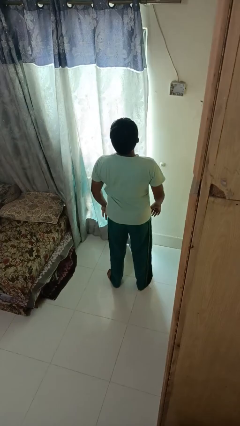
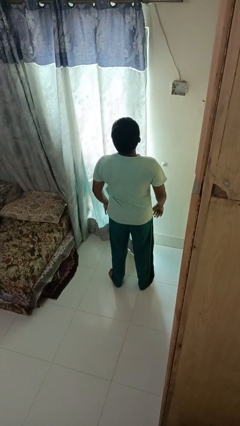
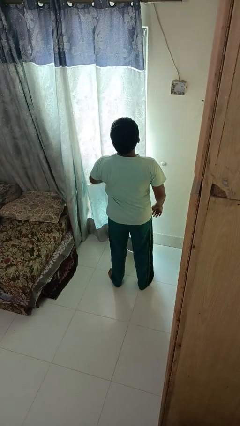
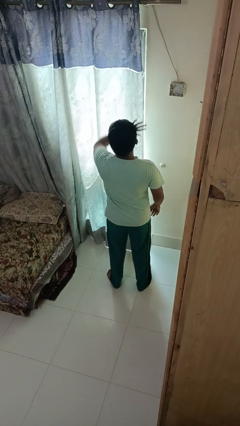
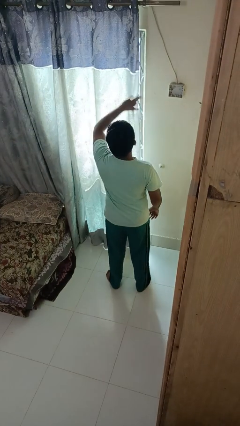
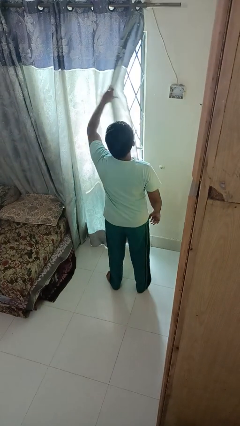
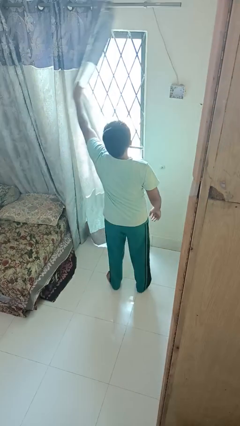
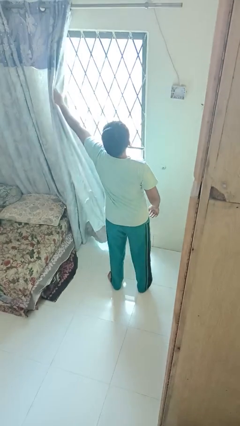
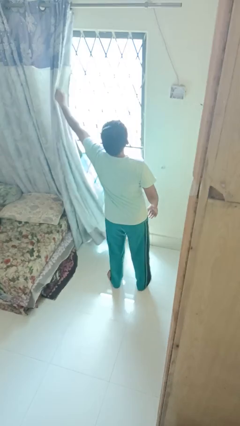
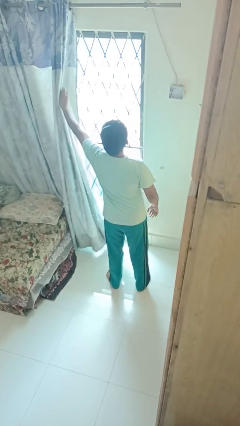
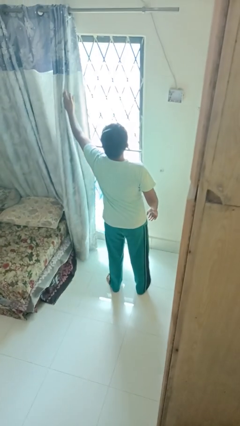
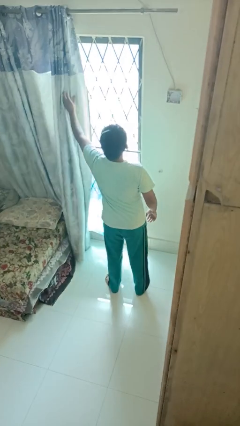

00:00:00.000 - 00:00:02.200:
person opens curtains

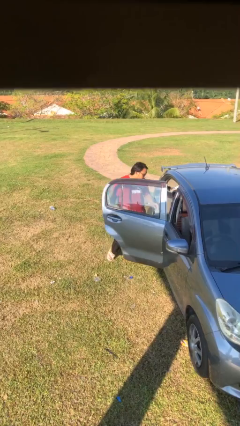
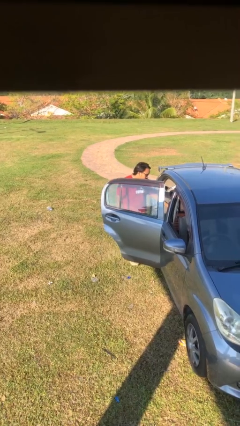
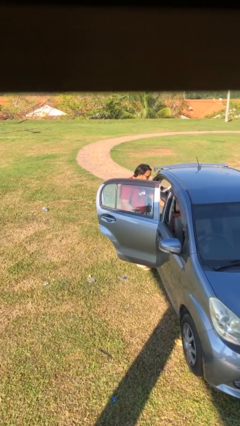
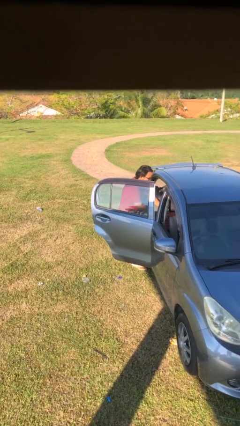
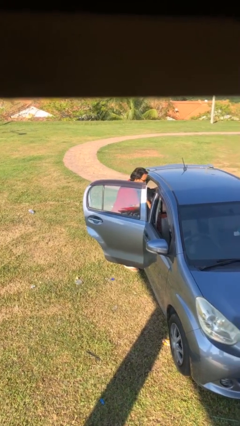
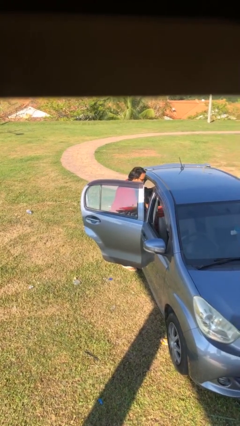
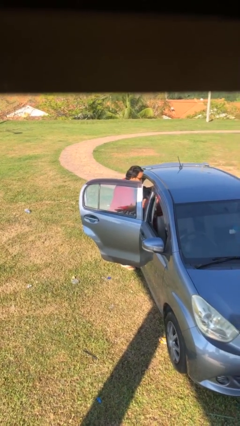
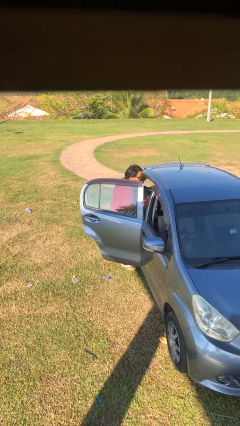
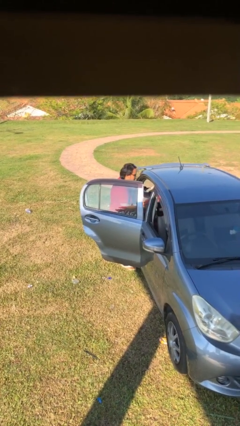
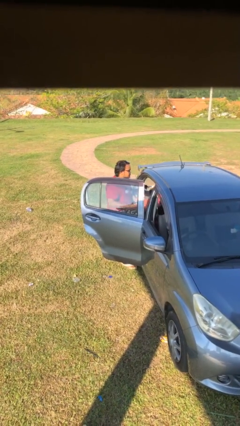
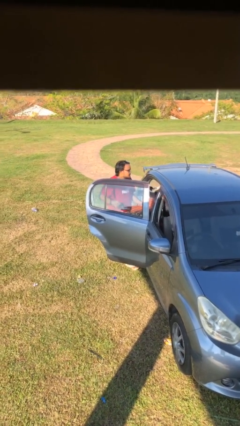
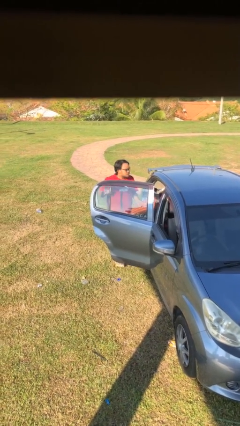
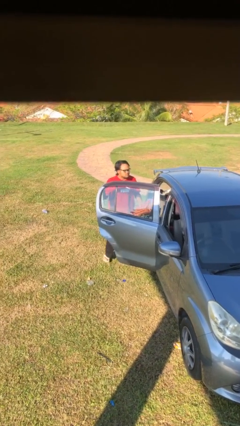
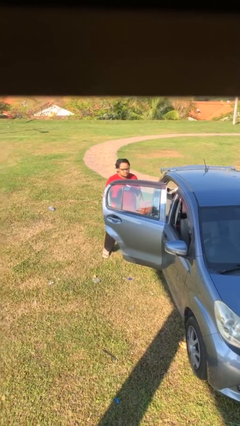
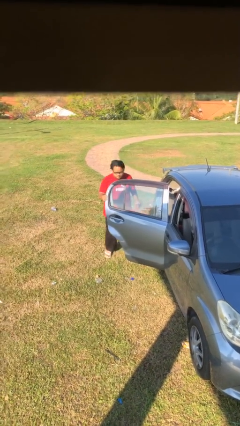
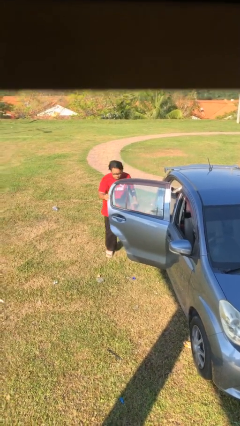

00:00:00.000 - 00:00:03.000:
person unloads car

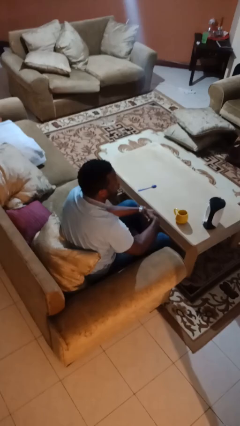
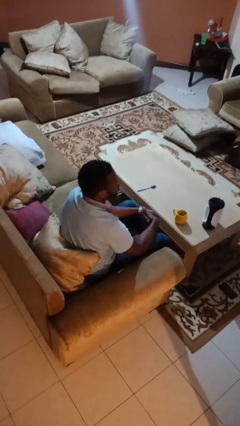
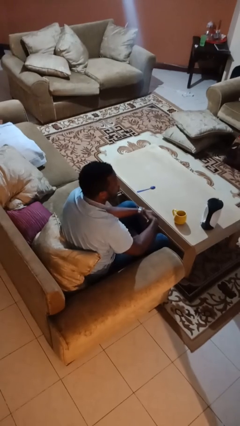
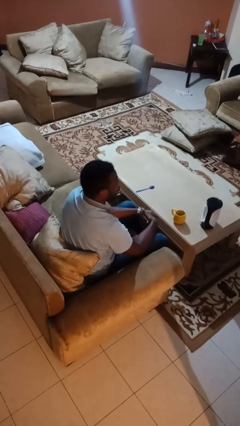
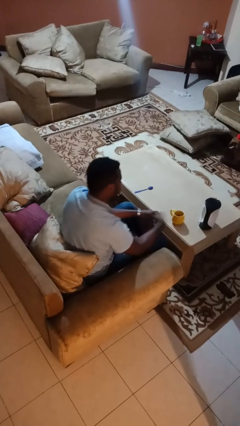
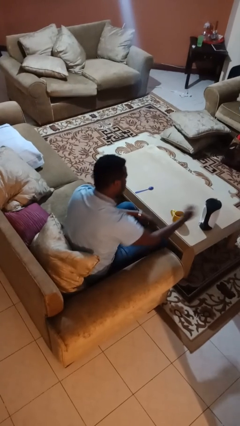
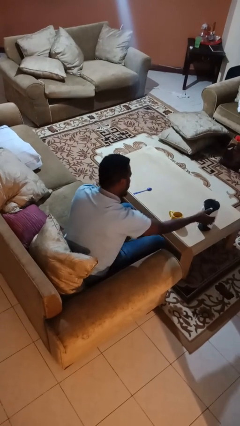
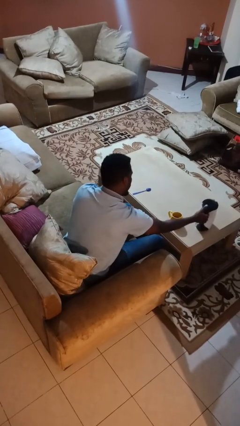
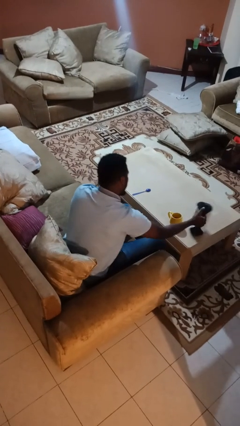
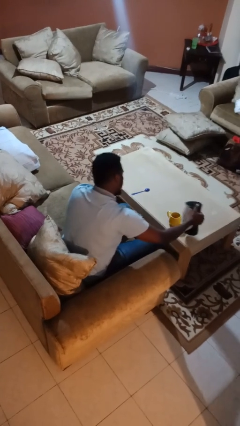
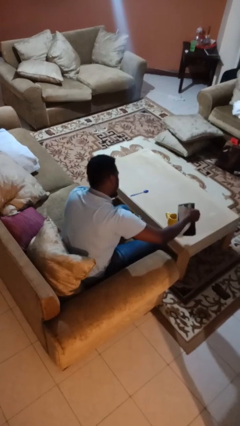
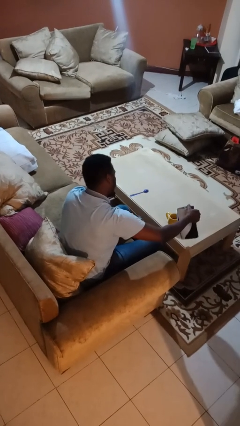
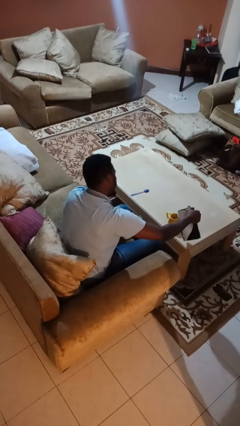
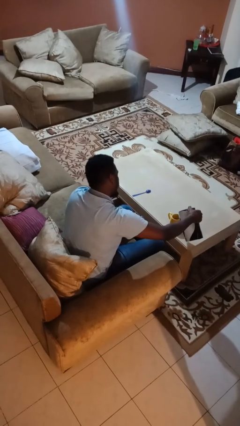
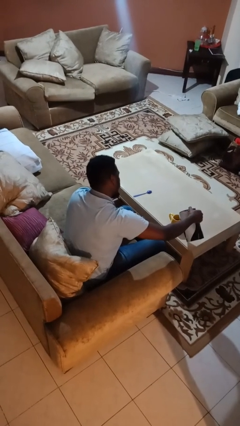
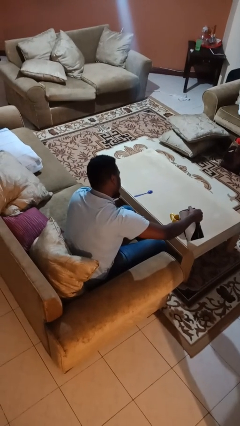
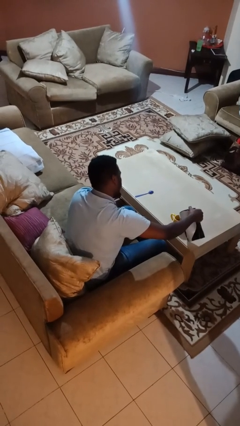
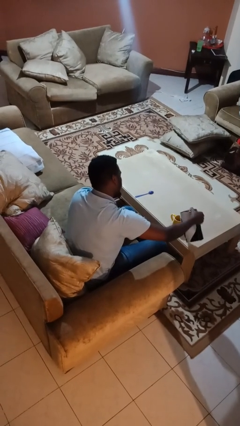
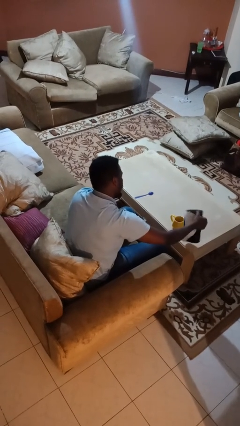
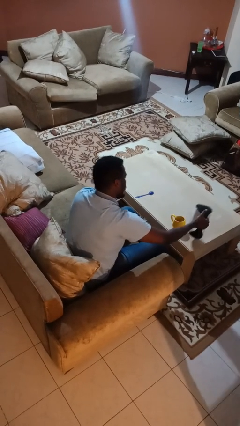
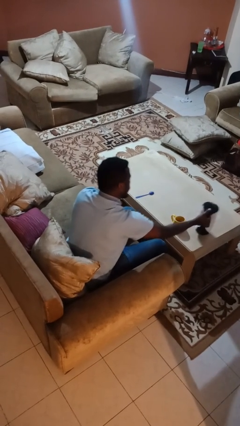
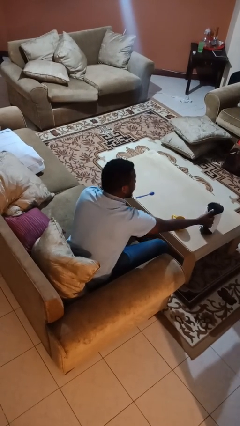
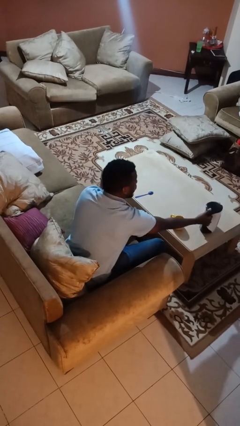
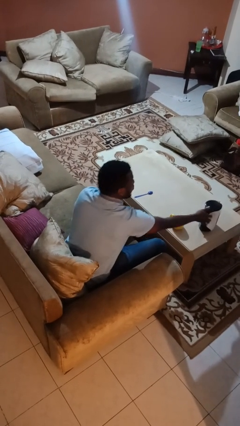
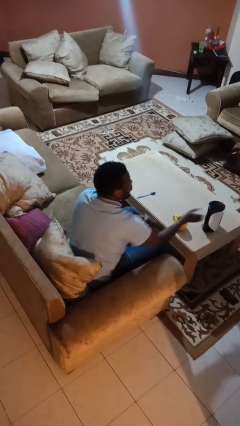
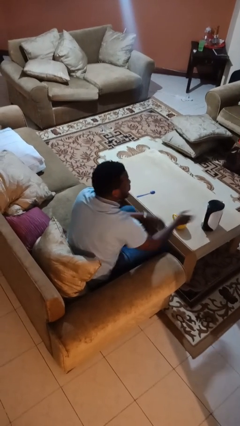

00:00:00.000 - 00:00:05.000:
person pours coffee into mug

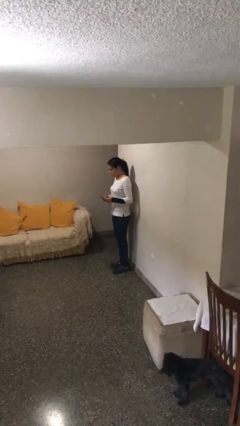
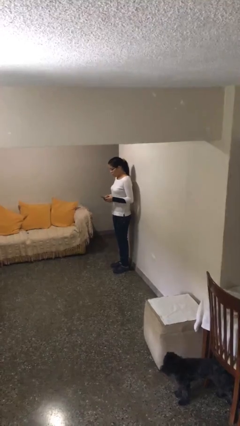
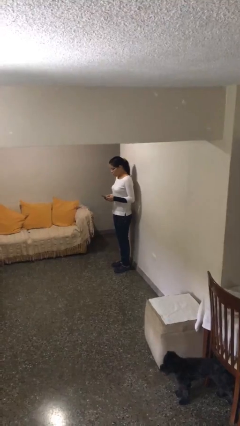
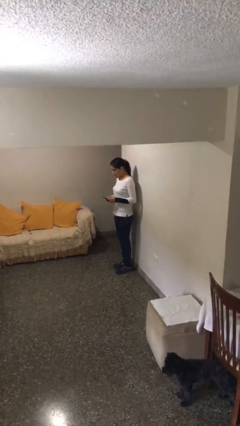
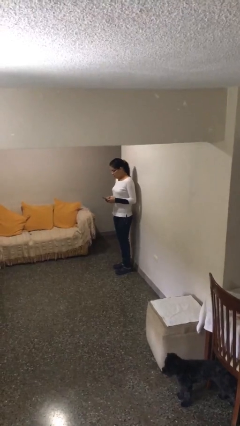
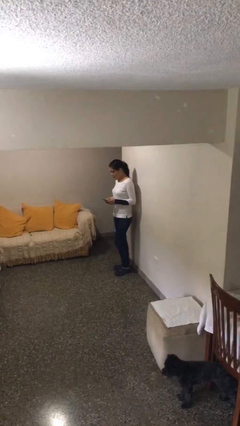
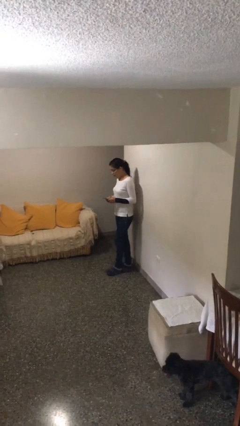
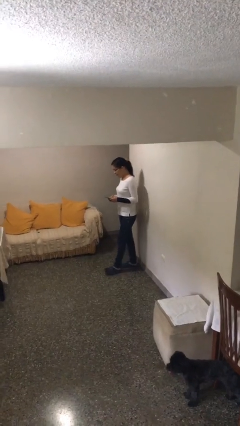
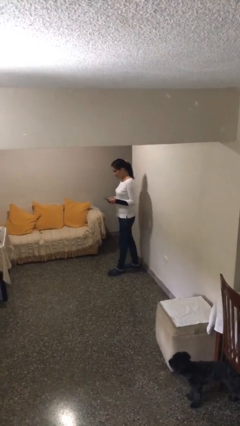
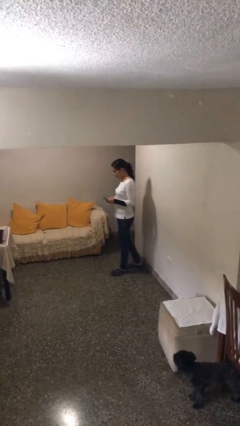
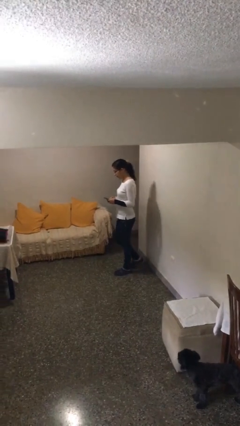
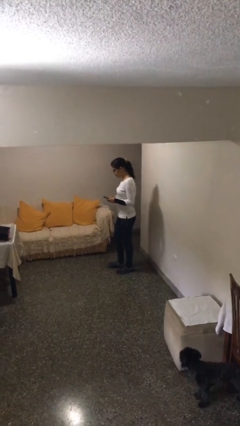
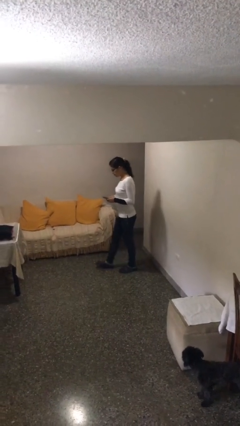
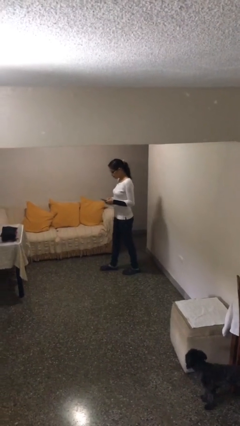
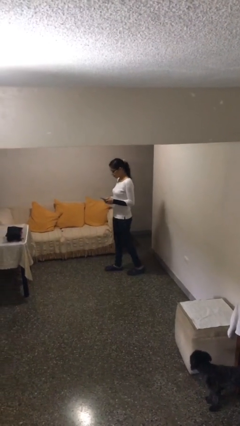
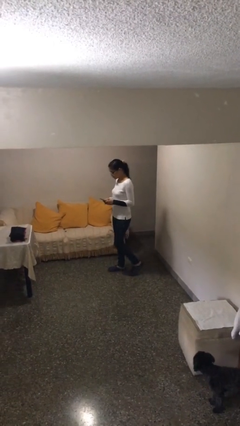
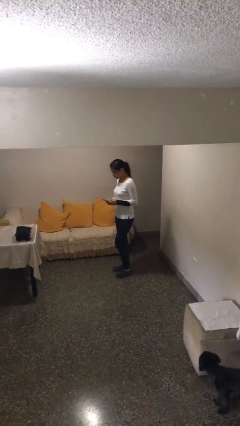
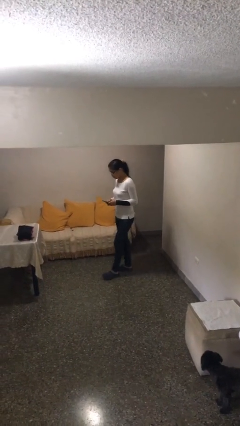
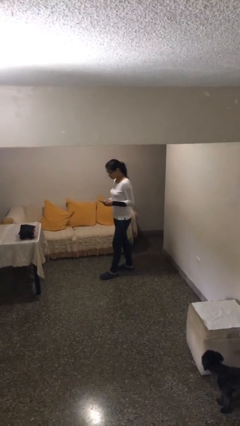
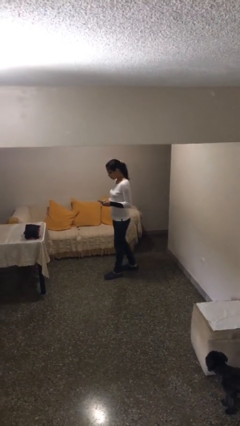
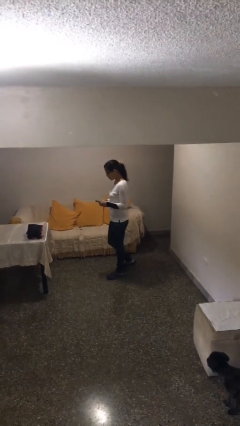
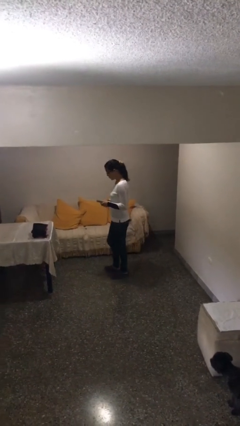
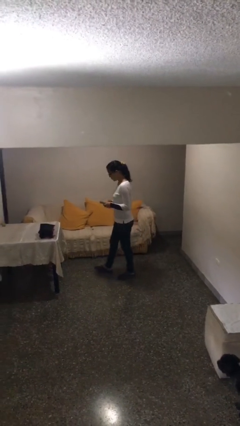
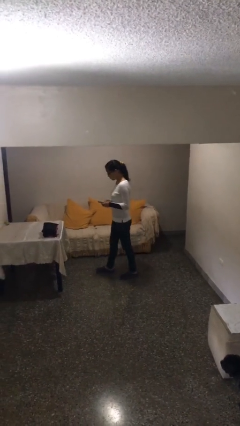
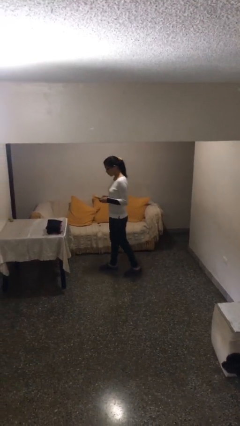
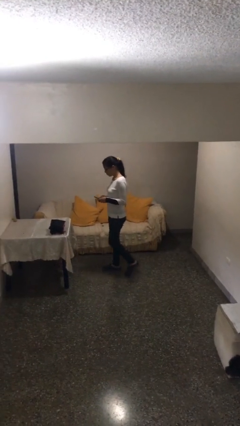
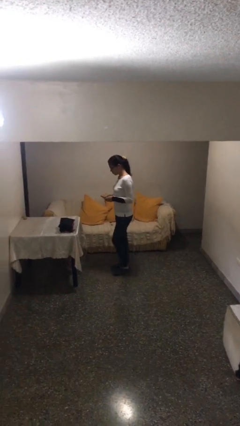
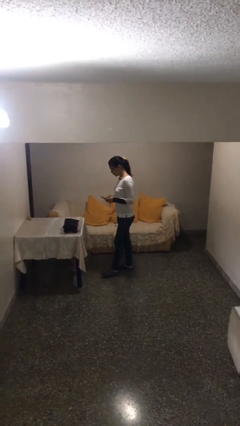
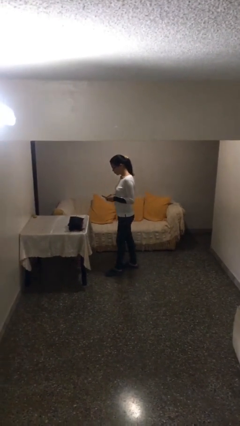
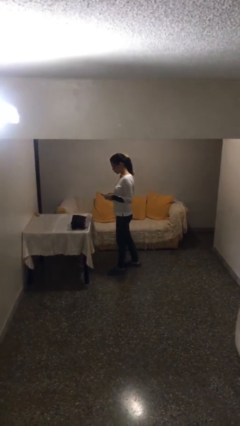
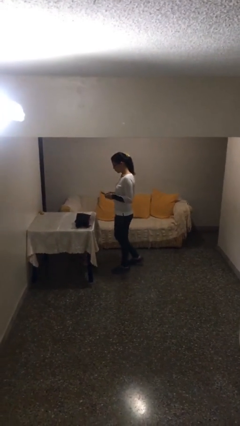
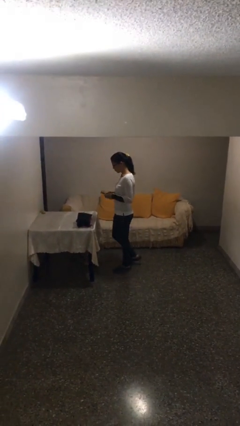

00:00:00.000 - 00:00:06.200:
person texts on phone

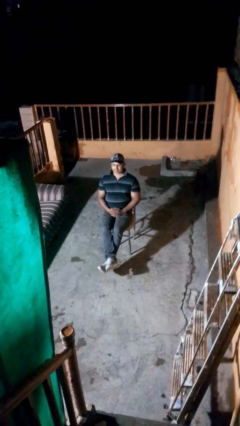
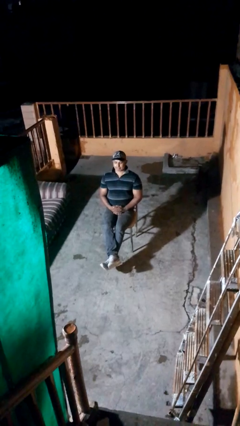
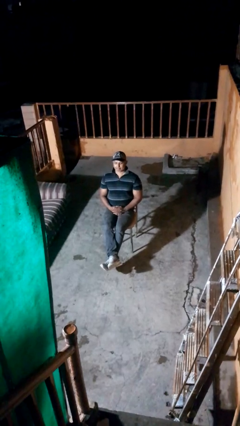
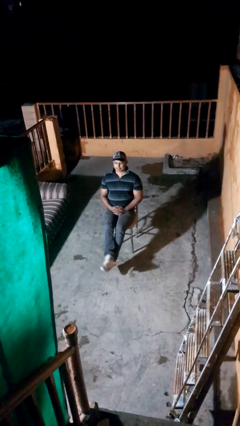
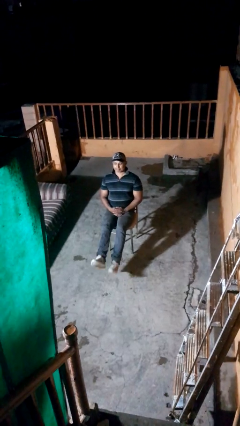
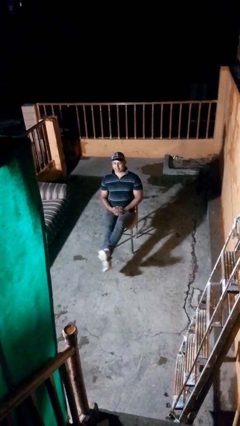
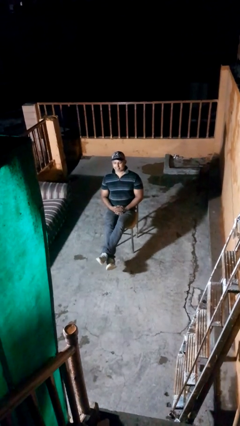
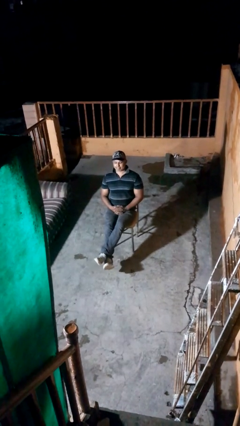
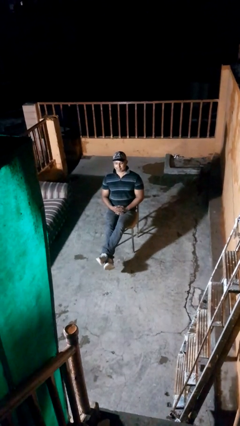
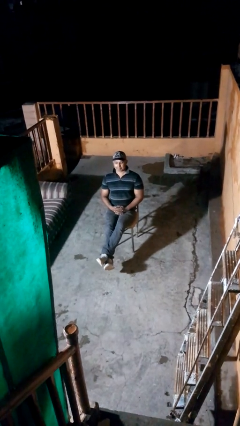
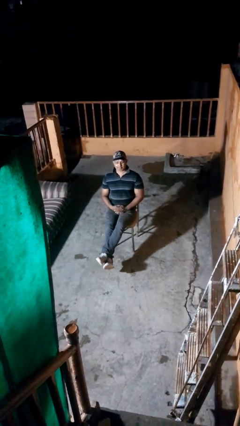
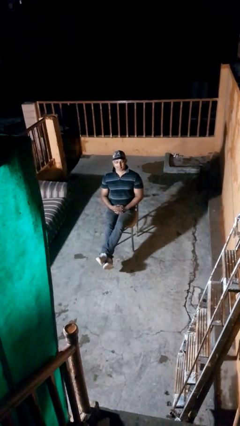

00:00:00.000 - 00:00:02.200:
person crosses legs
